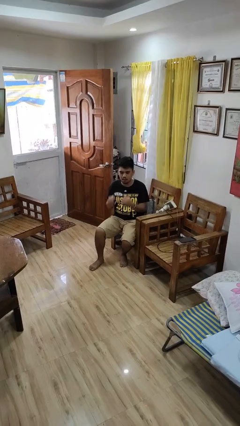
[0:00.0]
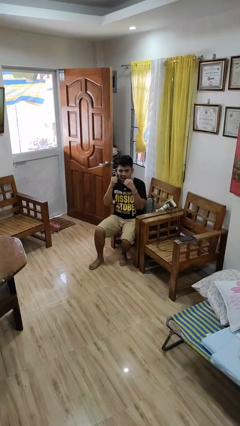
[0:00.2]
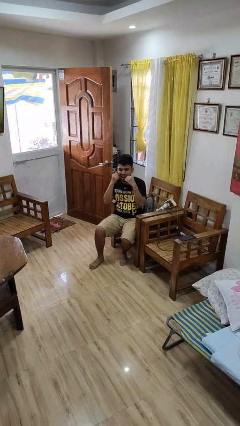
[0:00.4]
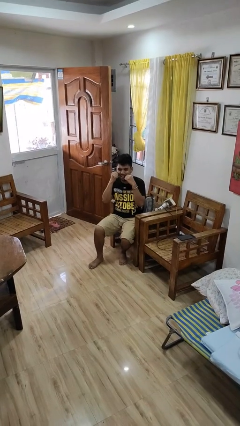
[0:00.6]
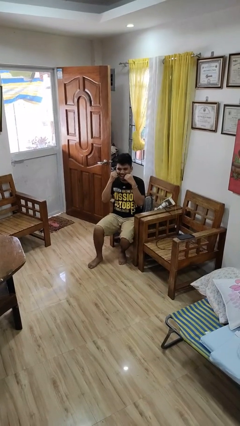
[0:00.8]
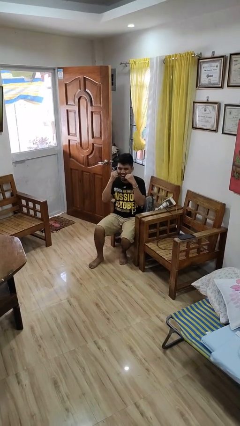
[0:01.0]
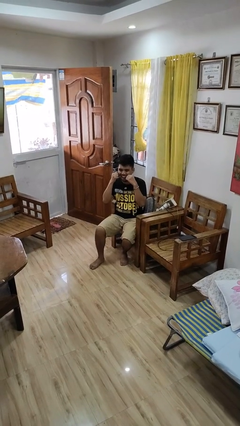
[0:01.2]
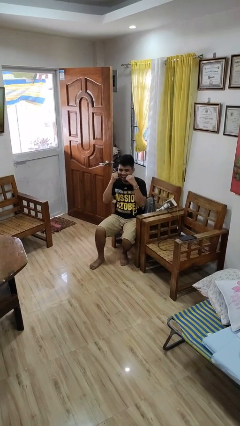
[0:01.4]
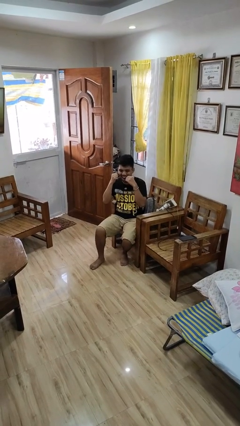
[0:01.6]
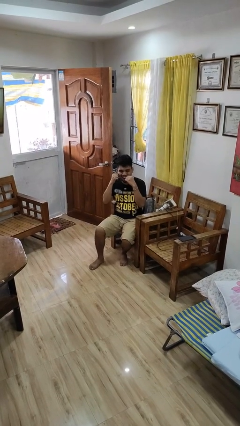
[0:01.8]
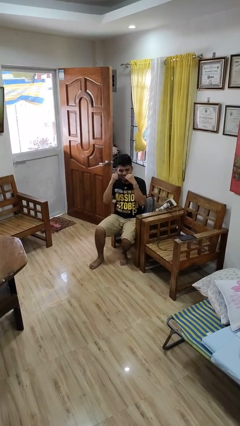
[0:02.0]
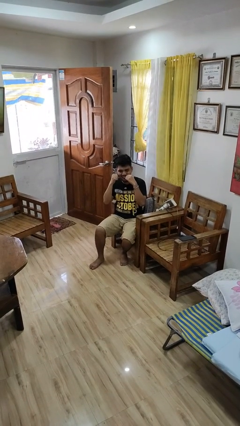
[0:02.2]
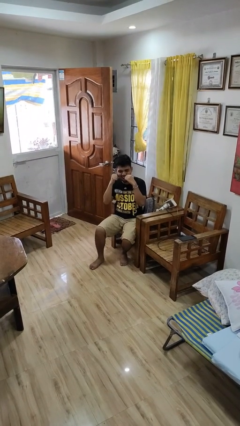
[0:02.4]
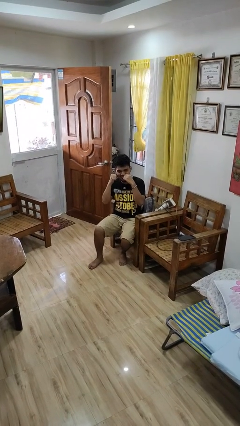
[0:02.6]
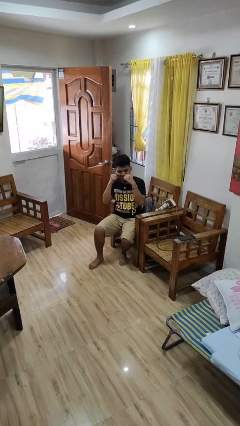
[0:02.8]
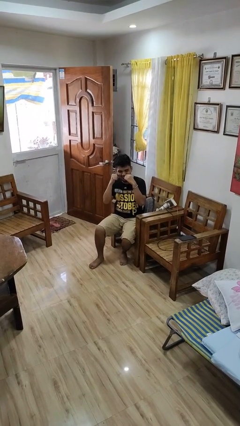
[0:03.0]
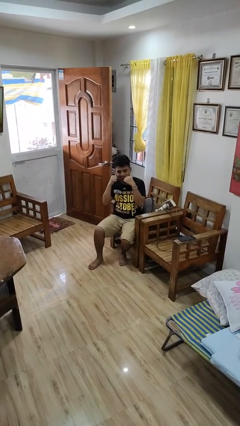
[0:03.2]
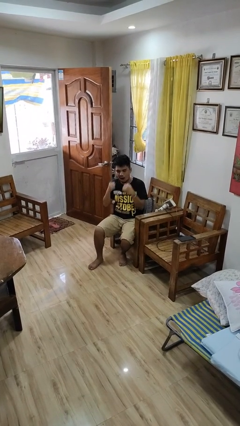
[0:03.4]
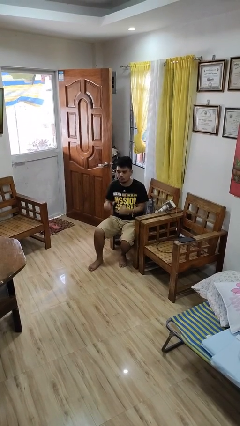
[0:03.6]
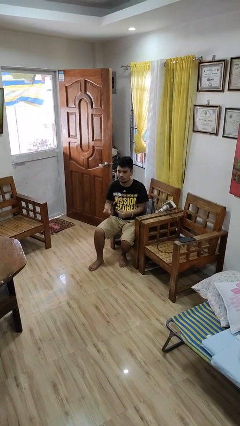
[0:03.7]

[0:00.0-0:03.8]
person flosses

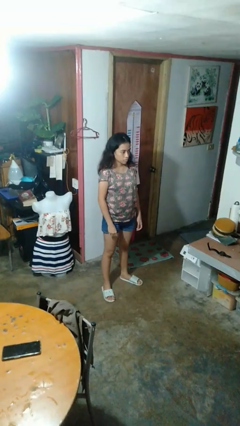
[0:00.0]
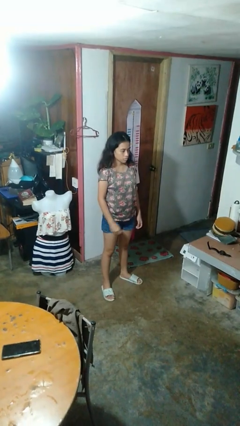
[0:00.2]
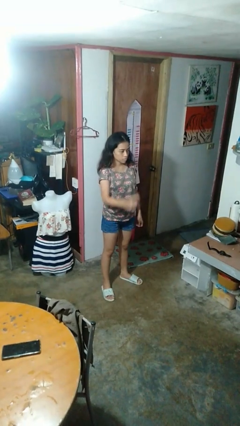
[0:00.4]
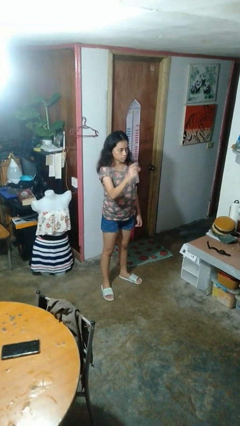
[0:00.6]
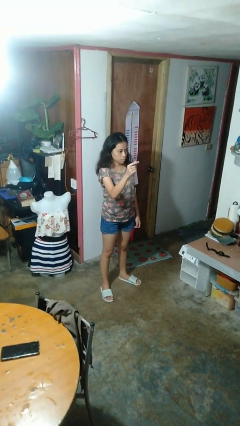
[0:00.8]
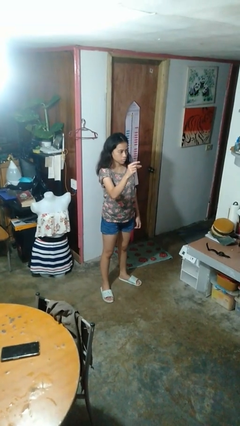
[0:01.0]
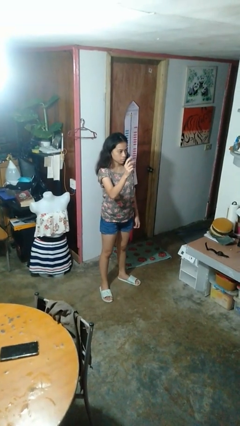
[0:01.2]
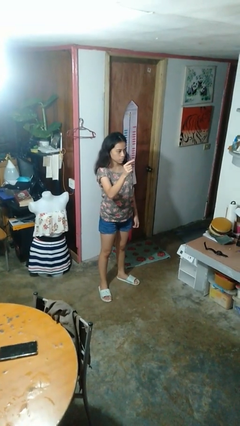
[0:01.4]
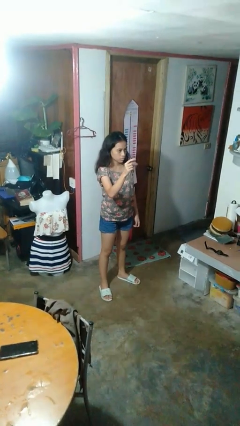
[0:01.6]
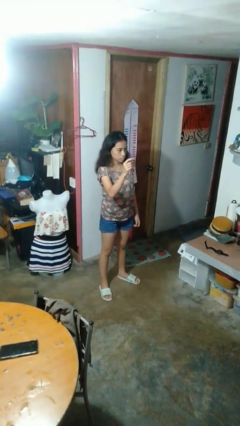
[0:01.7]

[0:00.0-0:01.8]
person snaps fingers

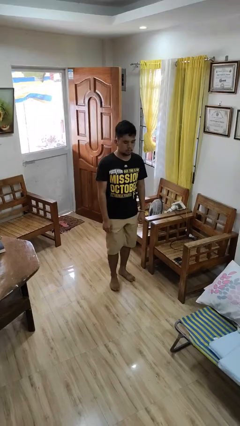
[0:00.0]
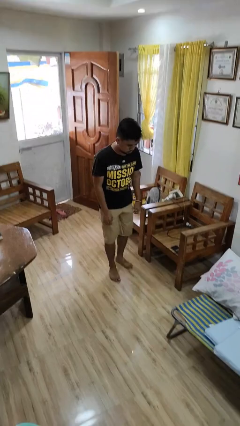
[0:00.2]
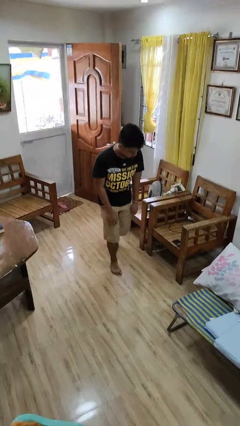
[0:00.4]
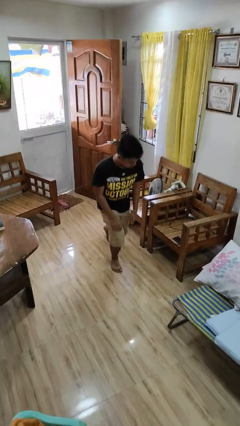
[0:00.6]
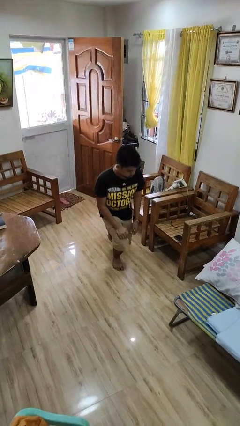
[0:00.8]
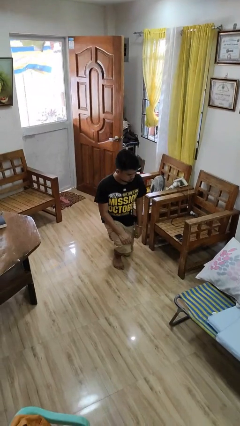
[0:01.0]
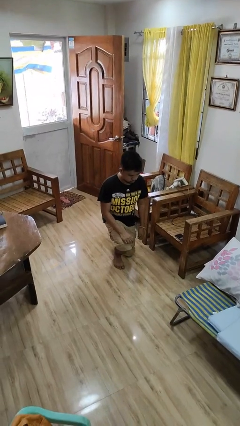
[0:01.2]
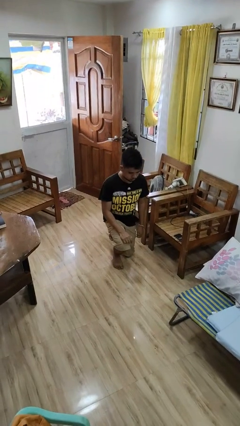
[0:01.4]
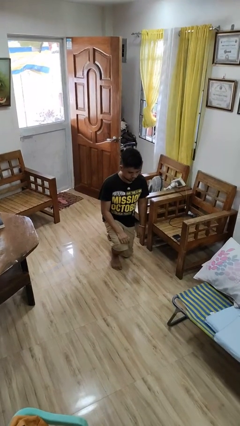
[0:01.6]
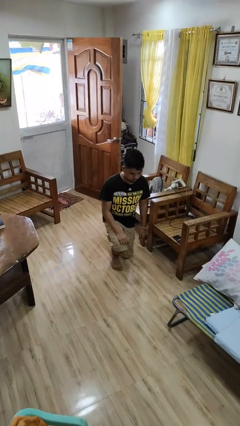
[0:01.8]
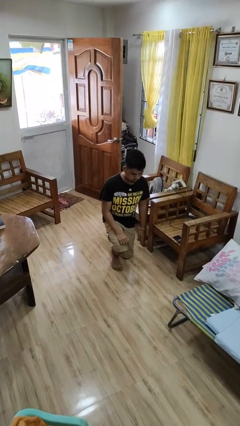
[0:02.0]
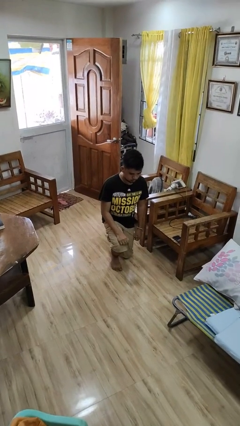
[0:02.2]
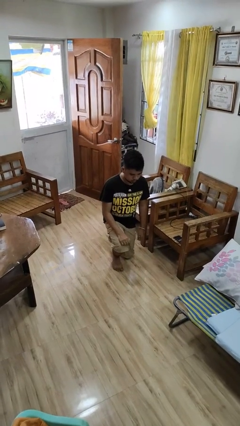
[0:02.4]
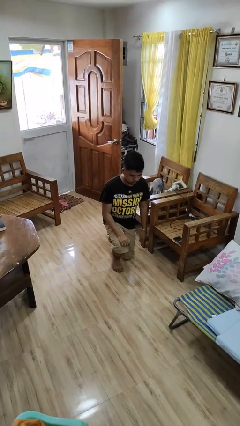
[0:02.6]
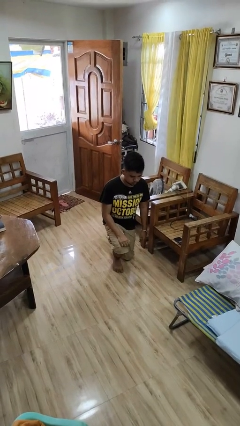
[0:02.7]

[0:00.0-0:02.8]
person kneels

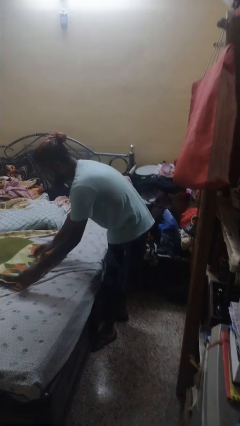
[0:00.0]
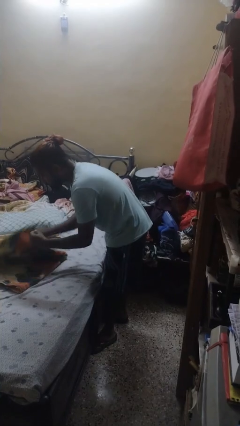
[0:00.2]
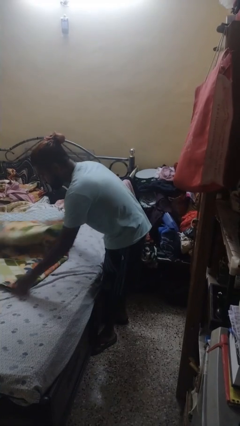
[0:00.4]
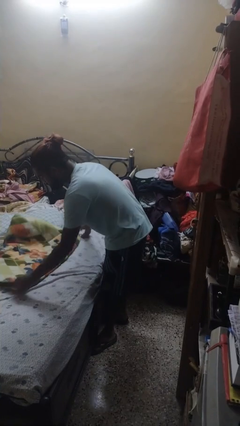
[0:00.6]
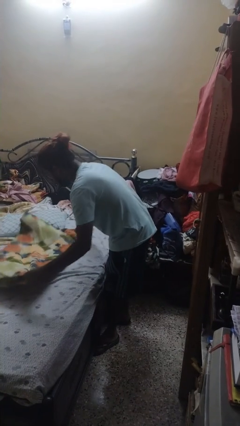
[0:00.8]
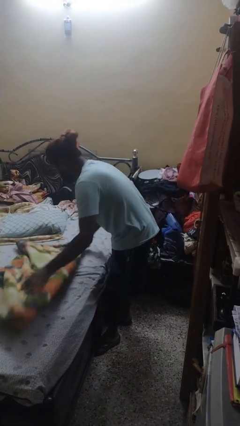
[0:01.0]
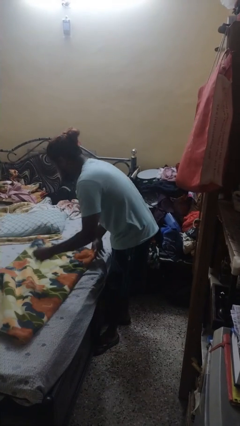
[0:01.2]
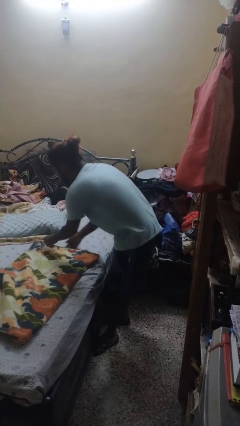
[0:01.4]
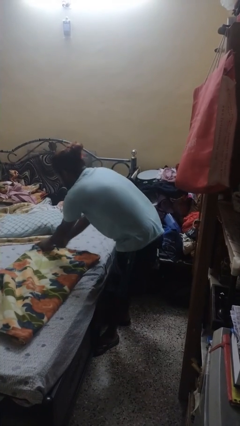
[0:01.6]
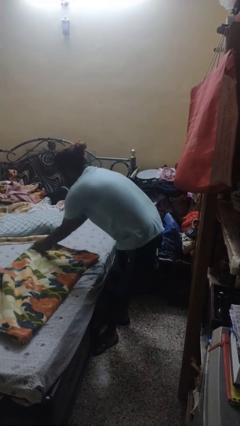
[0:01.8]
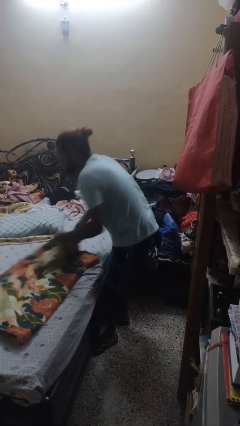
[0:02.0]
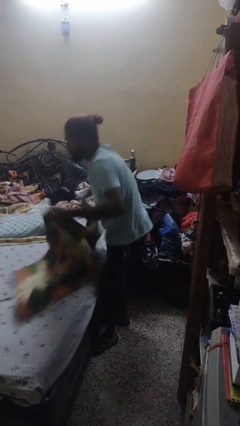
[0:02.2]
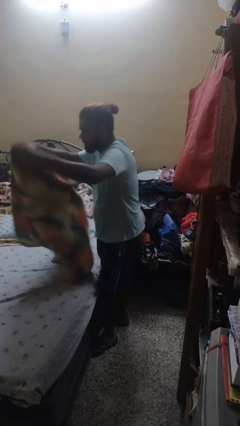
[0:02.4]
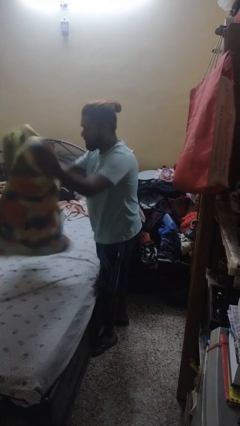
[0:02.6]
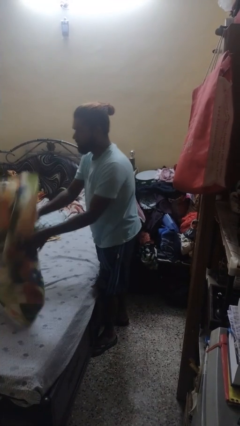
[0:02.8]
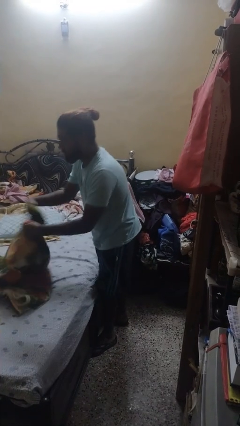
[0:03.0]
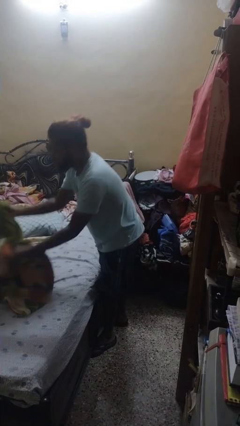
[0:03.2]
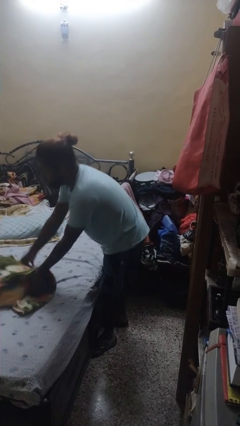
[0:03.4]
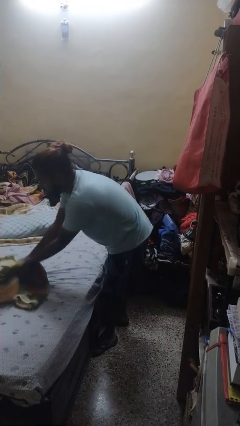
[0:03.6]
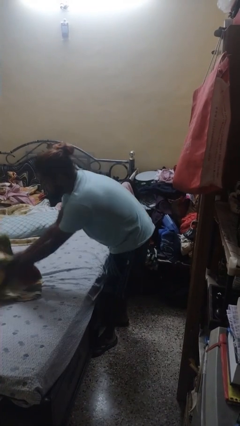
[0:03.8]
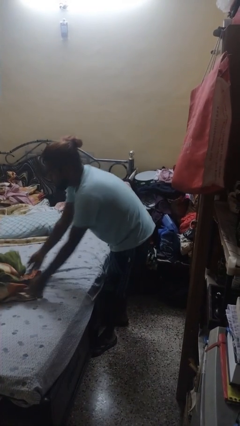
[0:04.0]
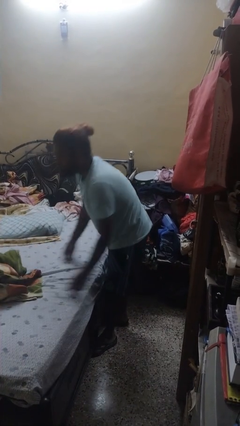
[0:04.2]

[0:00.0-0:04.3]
person unfolds blanket

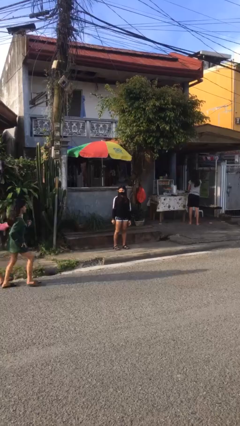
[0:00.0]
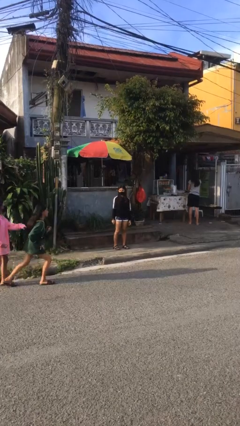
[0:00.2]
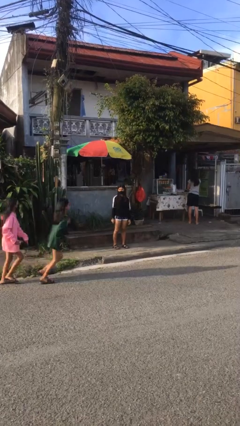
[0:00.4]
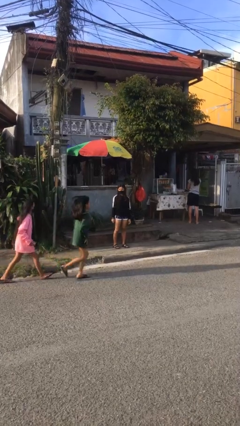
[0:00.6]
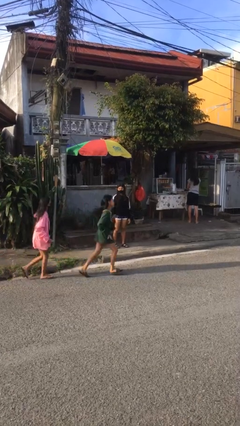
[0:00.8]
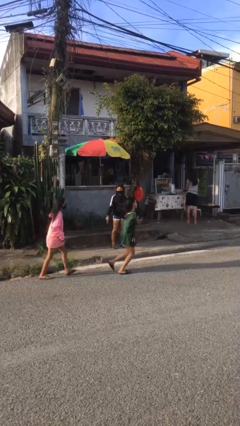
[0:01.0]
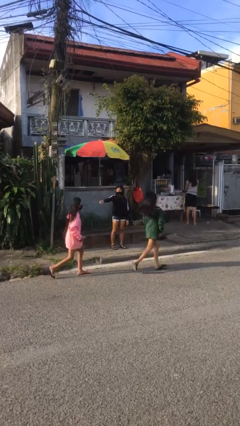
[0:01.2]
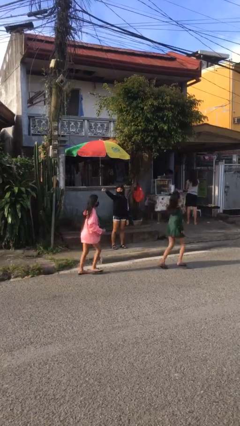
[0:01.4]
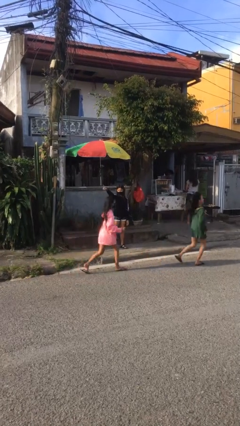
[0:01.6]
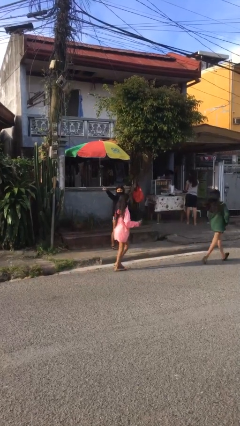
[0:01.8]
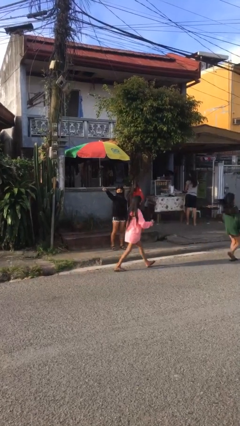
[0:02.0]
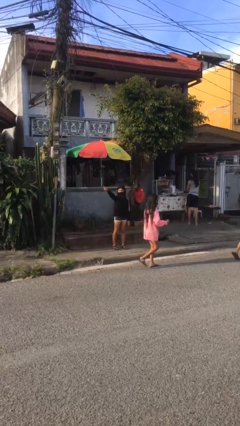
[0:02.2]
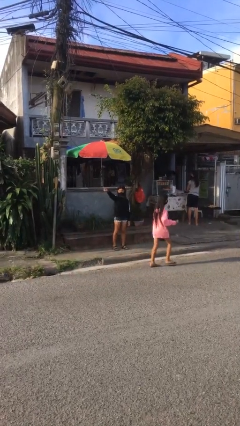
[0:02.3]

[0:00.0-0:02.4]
person points at person

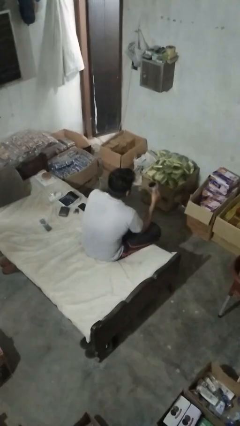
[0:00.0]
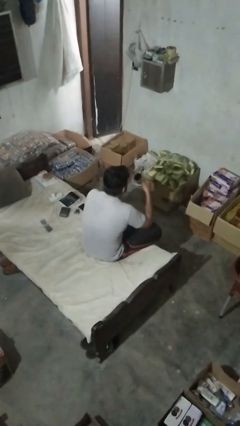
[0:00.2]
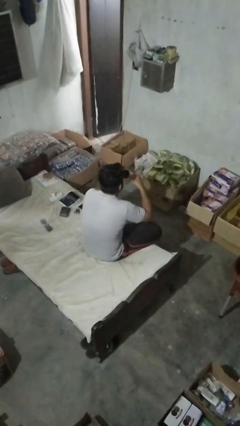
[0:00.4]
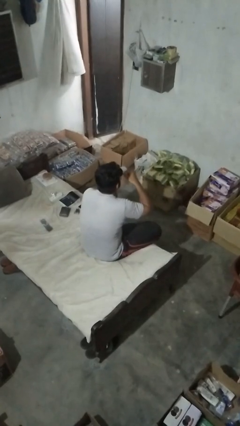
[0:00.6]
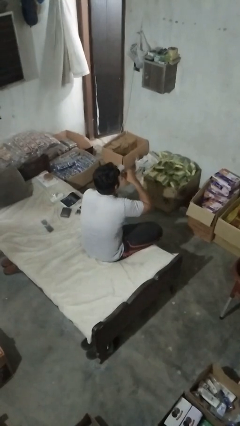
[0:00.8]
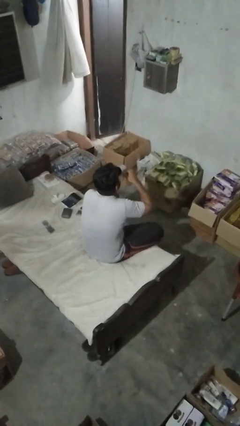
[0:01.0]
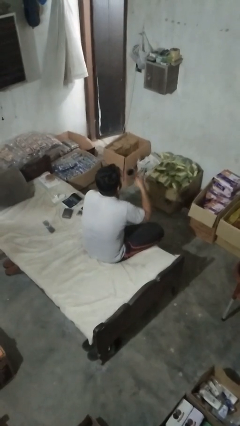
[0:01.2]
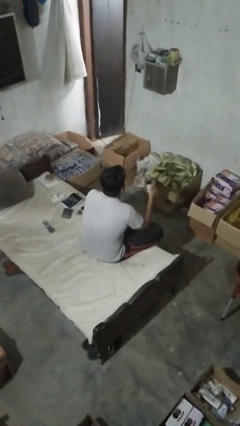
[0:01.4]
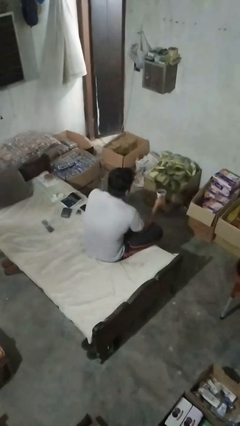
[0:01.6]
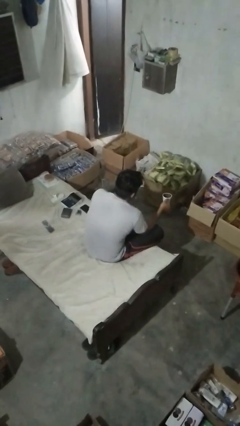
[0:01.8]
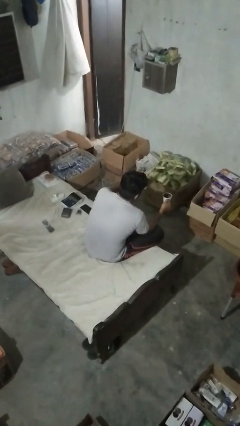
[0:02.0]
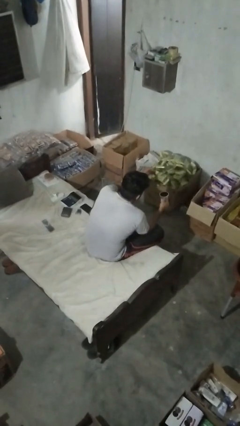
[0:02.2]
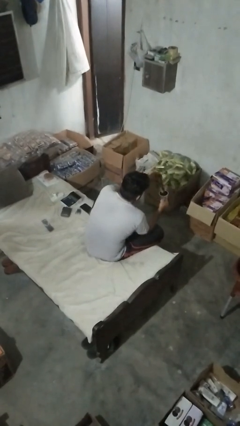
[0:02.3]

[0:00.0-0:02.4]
person drinks from mug
